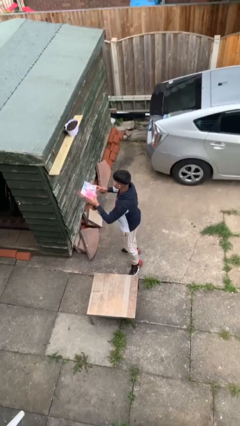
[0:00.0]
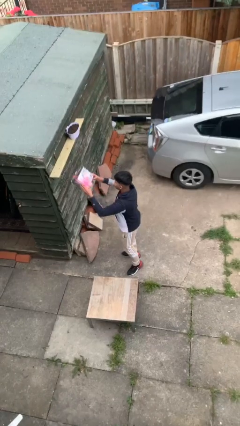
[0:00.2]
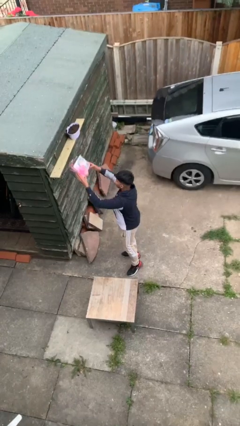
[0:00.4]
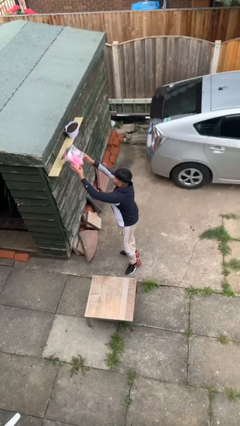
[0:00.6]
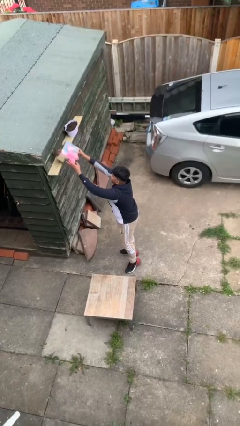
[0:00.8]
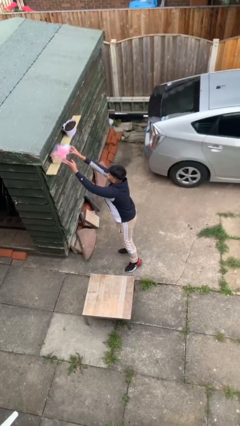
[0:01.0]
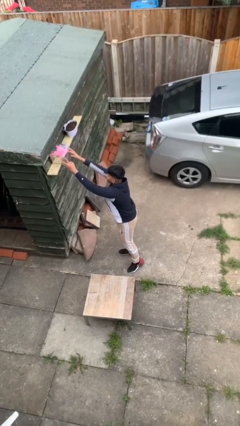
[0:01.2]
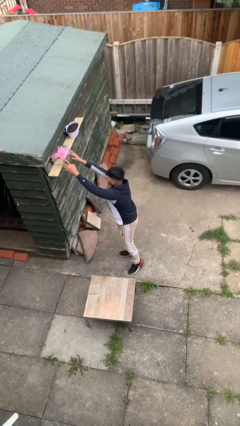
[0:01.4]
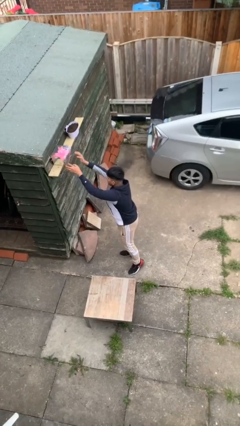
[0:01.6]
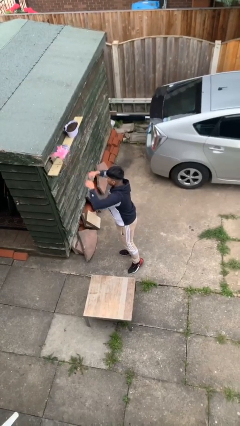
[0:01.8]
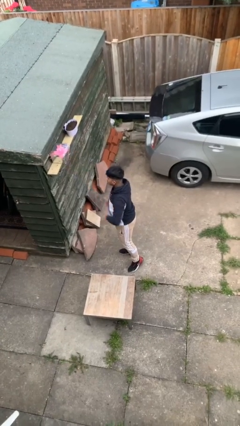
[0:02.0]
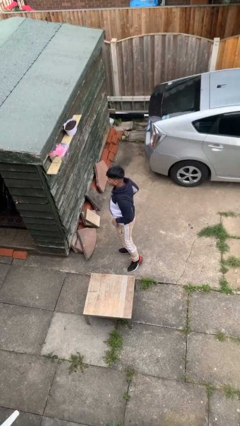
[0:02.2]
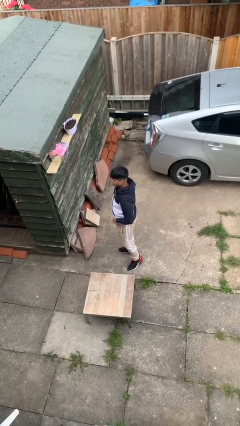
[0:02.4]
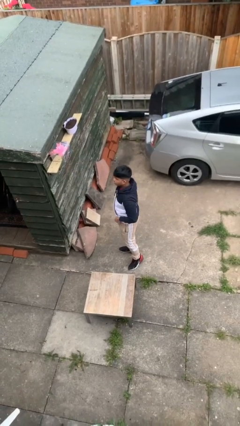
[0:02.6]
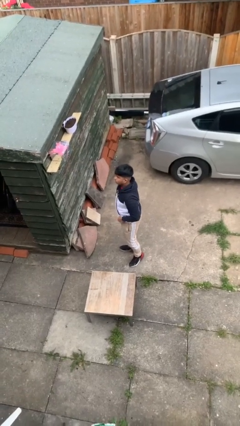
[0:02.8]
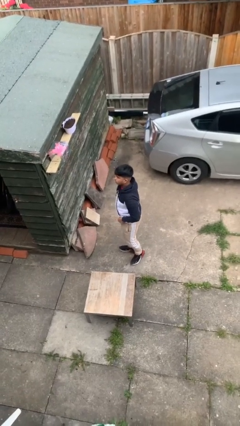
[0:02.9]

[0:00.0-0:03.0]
person puts down object on shelf

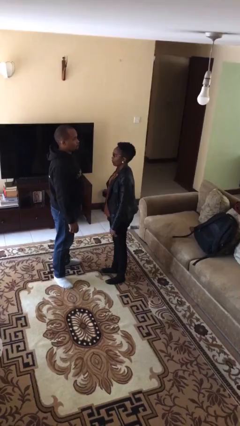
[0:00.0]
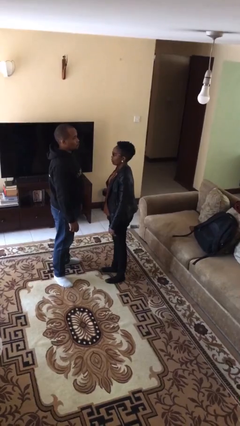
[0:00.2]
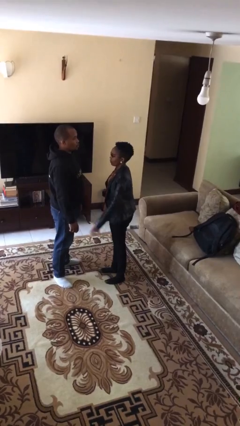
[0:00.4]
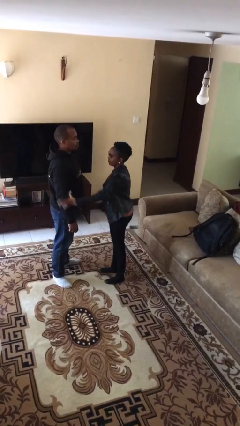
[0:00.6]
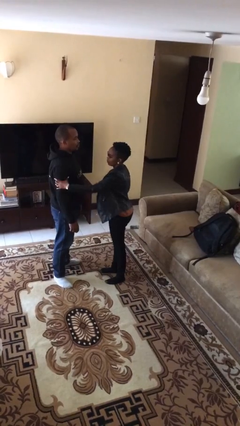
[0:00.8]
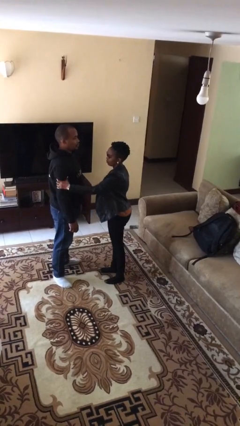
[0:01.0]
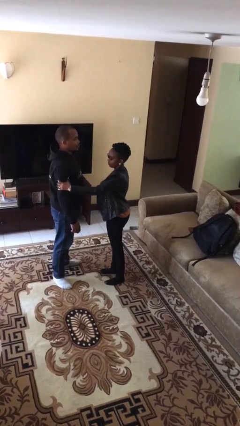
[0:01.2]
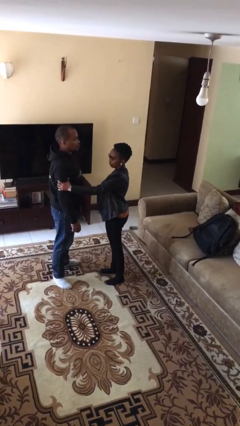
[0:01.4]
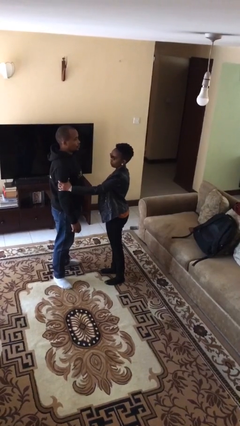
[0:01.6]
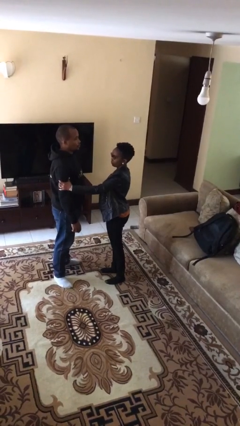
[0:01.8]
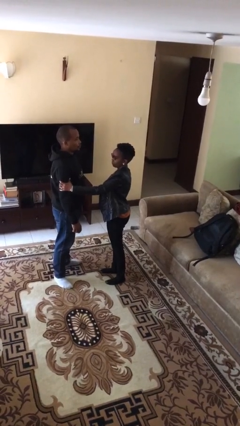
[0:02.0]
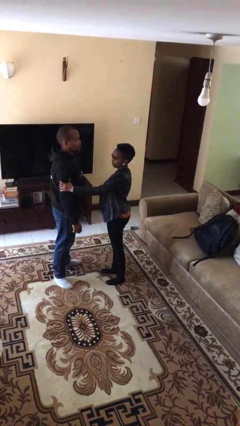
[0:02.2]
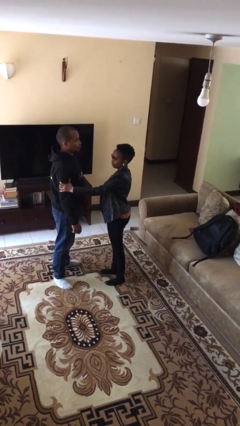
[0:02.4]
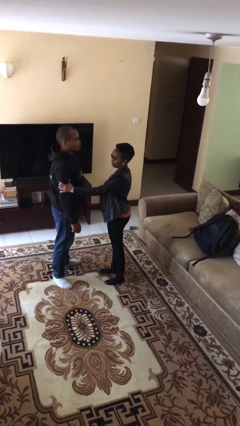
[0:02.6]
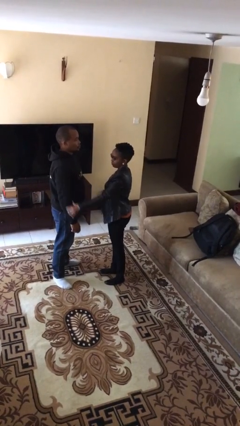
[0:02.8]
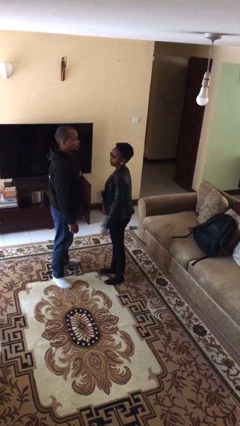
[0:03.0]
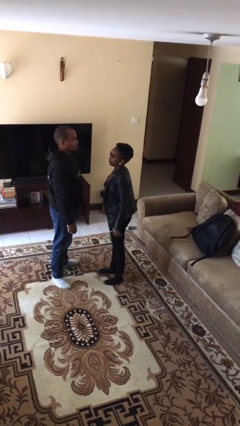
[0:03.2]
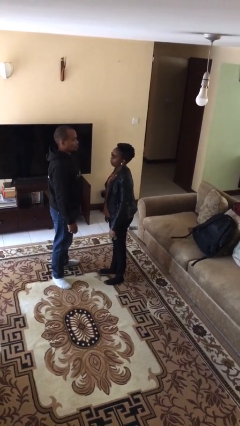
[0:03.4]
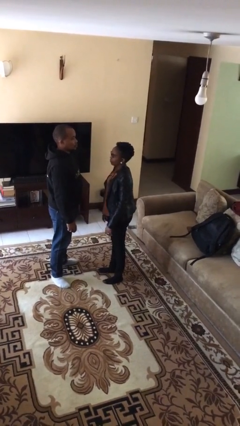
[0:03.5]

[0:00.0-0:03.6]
person grabs person by bicep

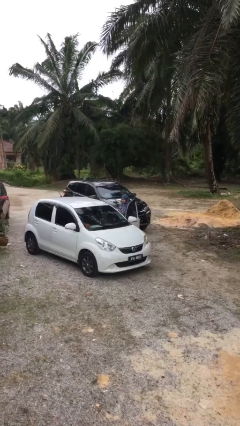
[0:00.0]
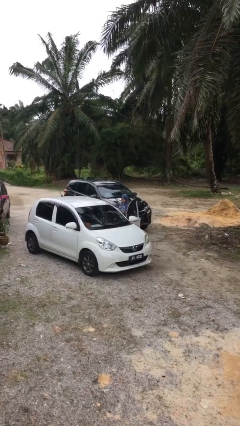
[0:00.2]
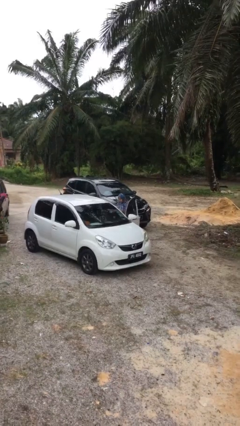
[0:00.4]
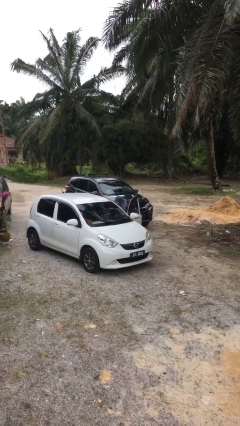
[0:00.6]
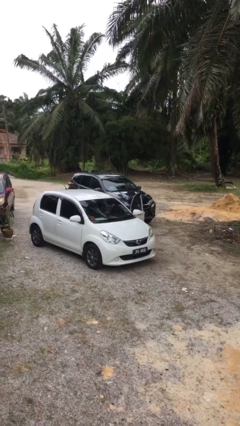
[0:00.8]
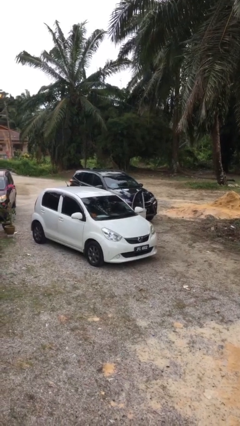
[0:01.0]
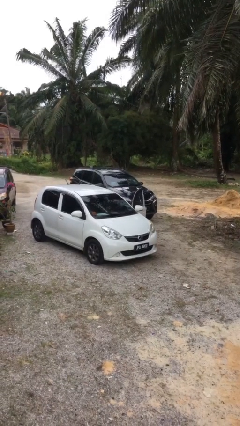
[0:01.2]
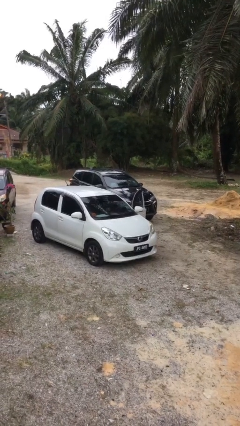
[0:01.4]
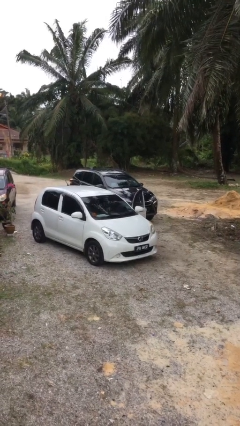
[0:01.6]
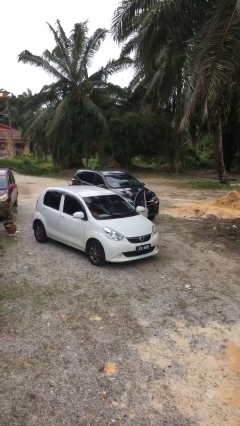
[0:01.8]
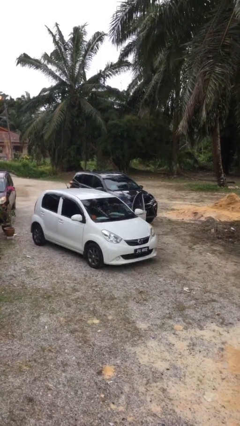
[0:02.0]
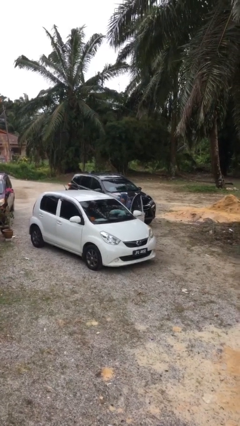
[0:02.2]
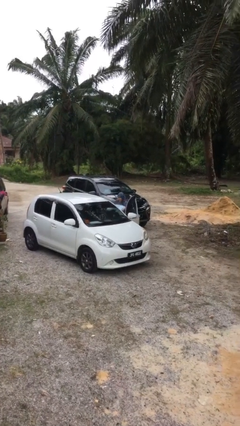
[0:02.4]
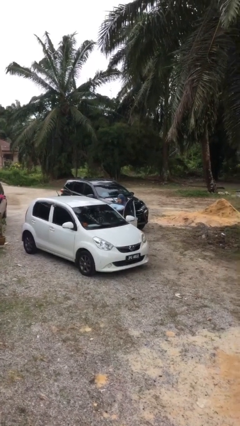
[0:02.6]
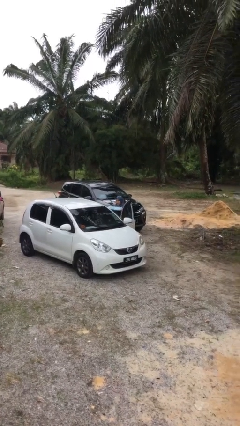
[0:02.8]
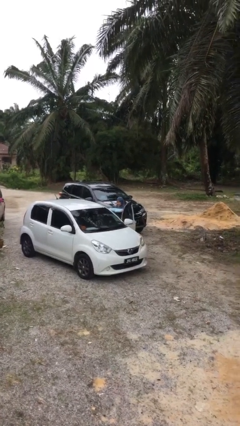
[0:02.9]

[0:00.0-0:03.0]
person unloads car

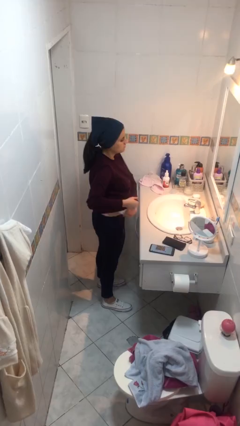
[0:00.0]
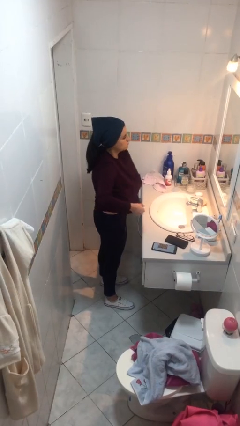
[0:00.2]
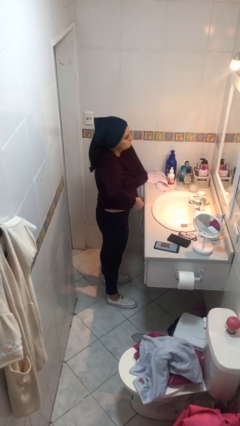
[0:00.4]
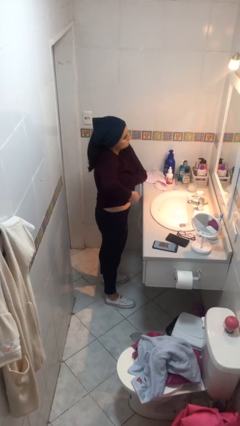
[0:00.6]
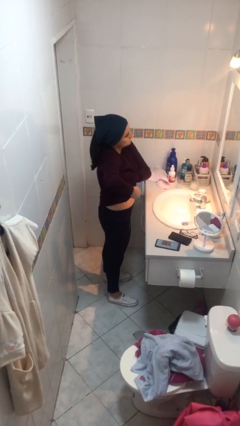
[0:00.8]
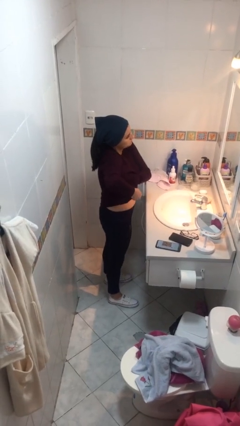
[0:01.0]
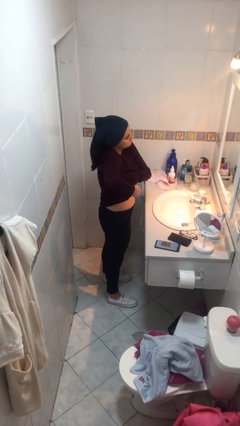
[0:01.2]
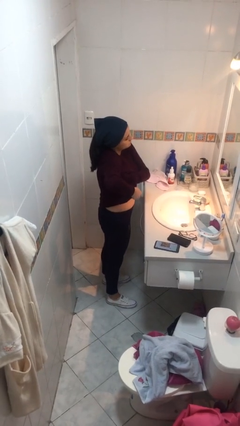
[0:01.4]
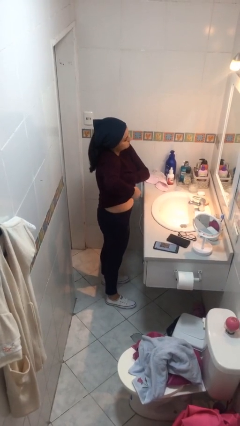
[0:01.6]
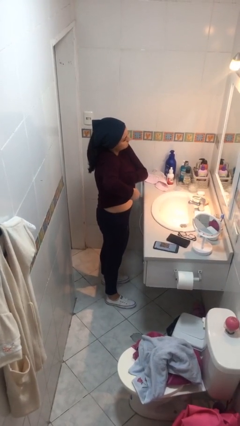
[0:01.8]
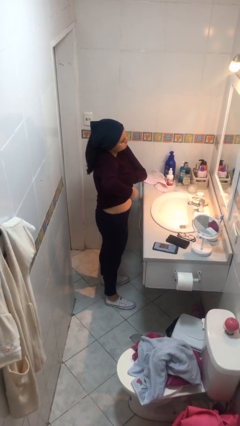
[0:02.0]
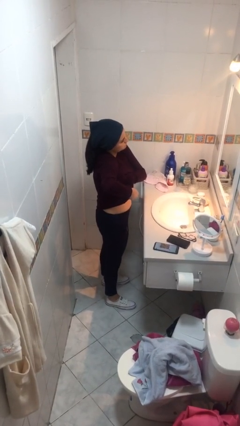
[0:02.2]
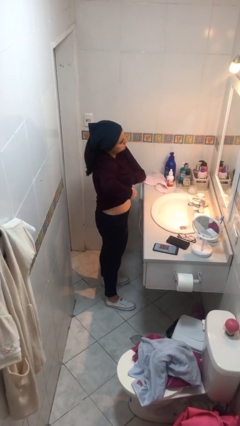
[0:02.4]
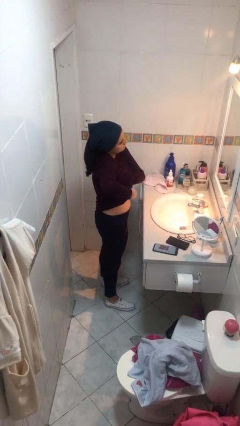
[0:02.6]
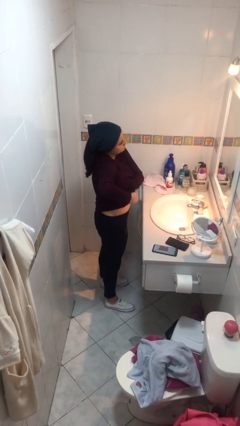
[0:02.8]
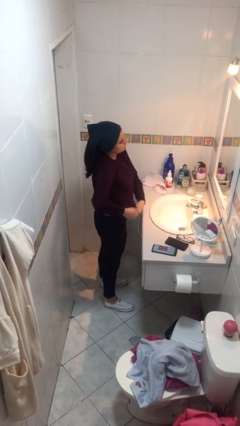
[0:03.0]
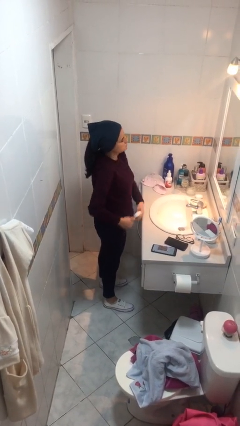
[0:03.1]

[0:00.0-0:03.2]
person applies deodorant

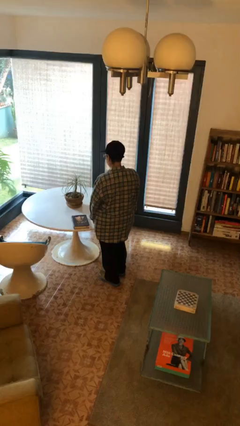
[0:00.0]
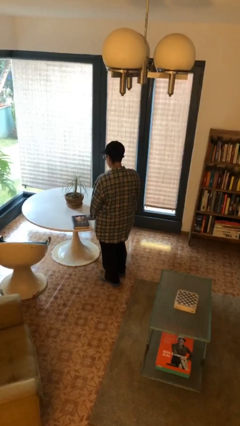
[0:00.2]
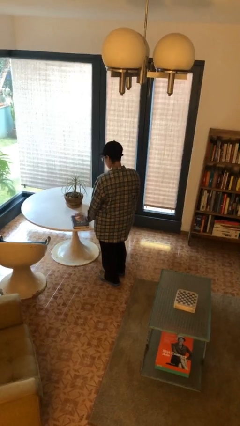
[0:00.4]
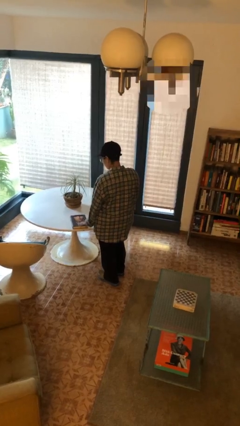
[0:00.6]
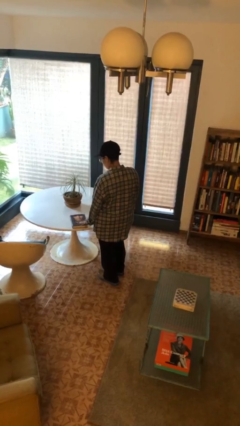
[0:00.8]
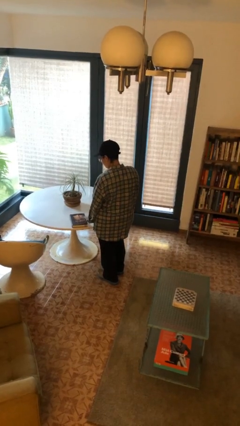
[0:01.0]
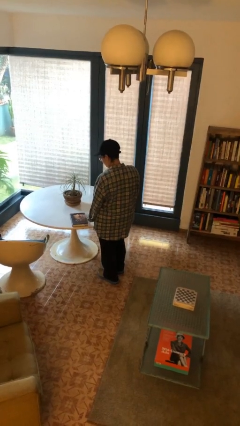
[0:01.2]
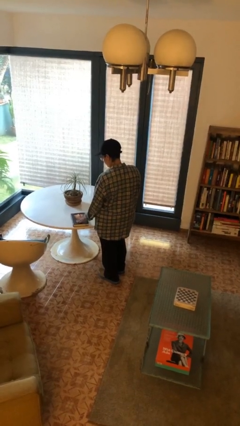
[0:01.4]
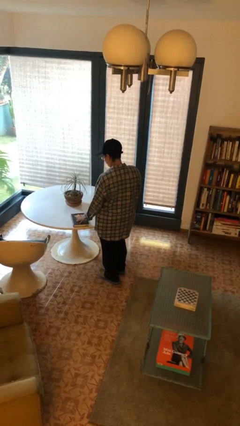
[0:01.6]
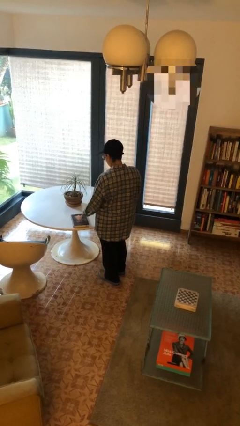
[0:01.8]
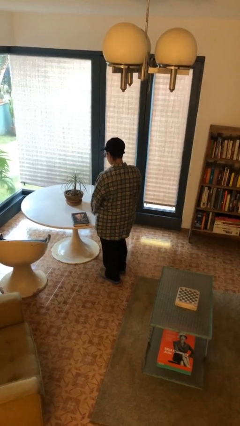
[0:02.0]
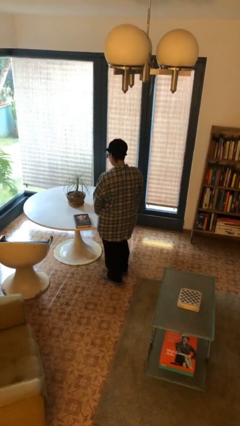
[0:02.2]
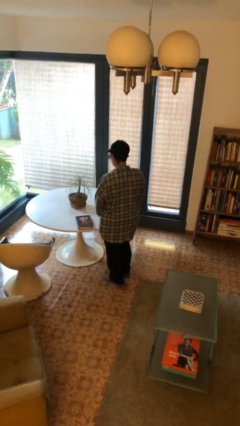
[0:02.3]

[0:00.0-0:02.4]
person taps object with finger

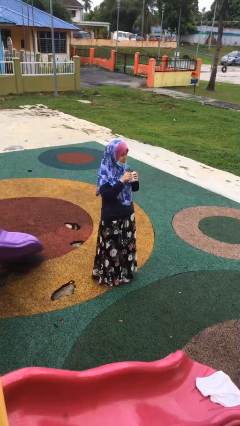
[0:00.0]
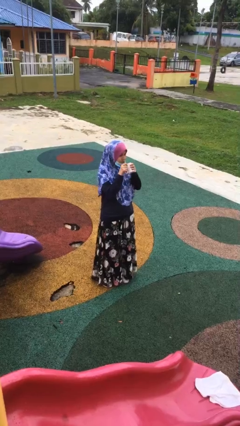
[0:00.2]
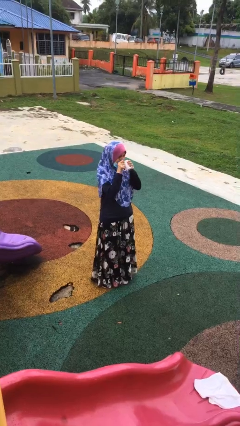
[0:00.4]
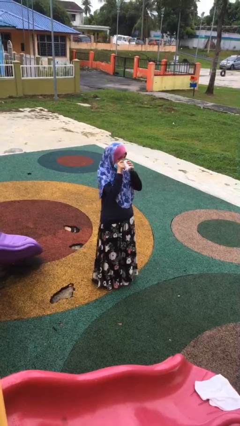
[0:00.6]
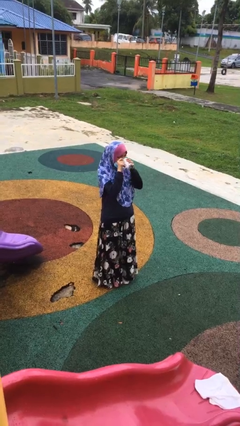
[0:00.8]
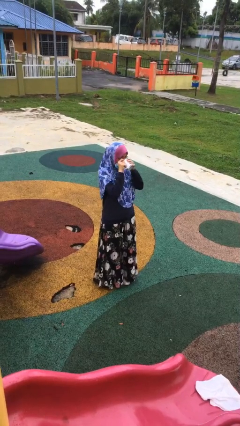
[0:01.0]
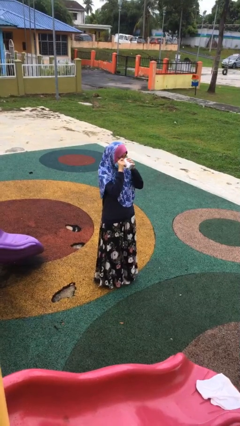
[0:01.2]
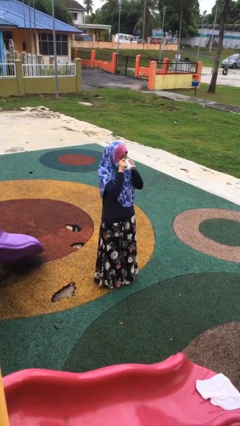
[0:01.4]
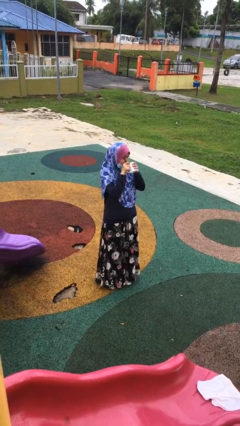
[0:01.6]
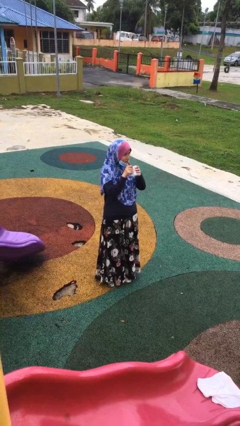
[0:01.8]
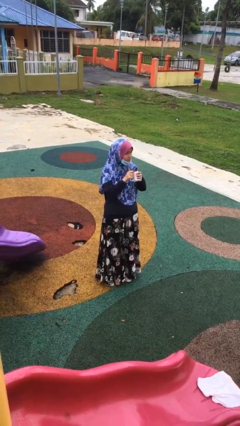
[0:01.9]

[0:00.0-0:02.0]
person drinks from mug

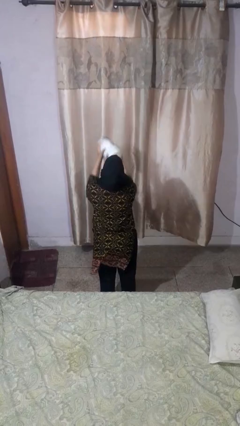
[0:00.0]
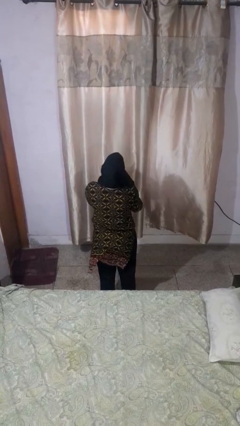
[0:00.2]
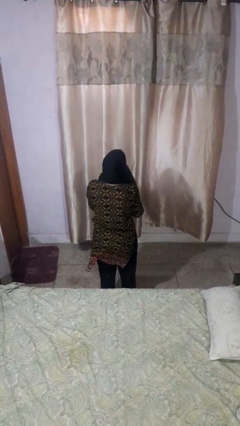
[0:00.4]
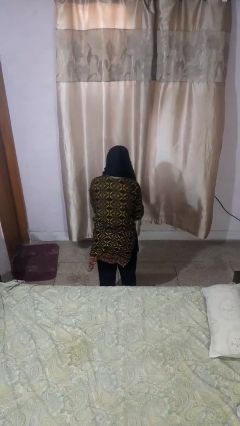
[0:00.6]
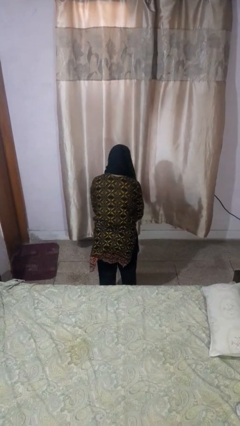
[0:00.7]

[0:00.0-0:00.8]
person catches dropped object
